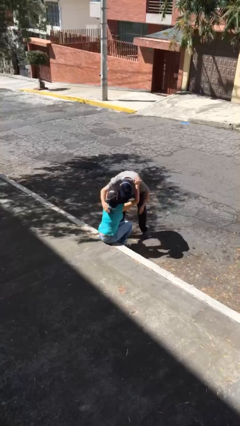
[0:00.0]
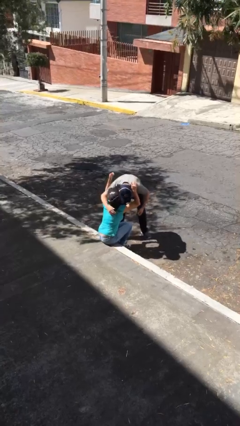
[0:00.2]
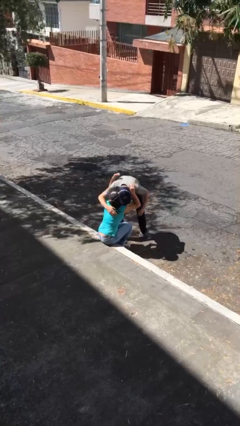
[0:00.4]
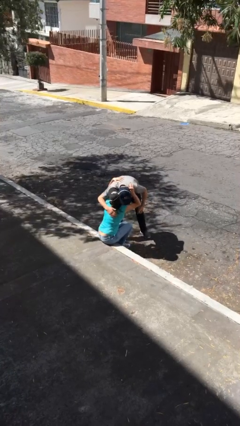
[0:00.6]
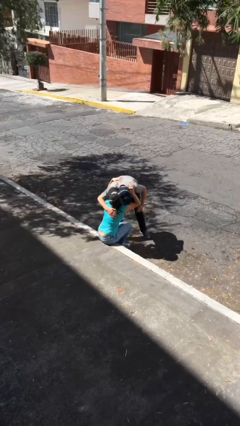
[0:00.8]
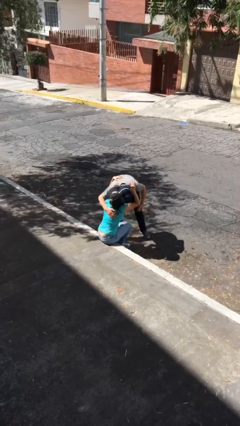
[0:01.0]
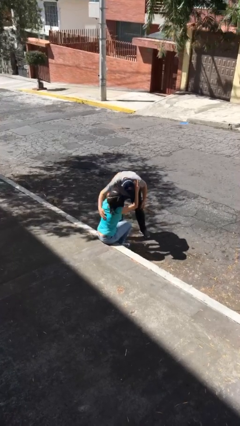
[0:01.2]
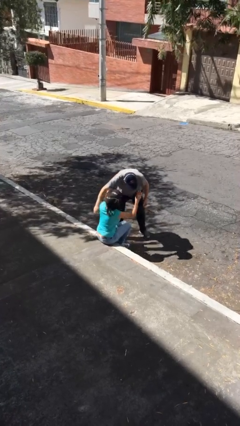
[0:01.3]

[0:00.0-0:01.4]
person embraces person

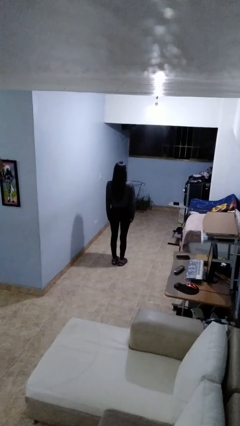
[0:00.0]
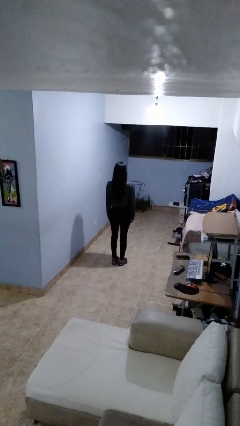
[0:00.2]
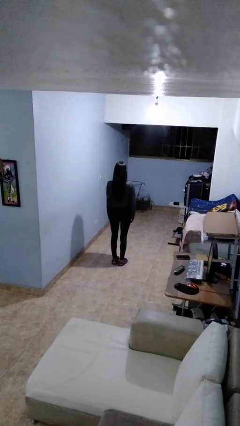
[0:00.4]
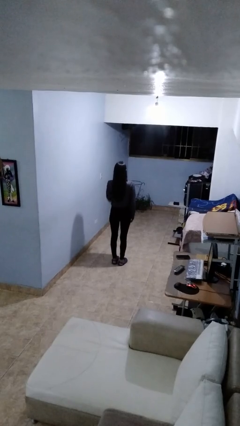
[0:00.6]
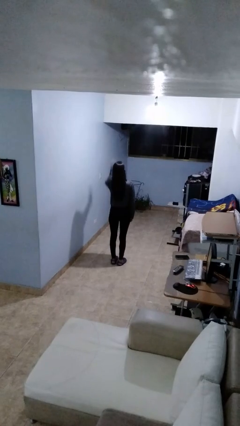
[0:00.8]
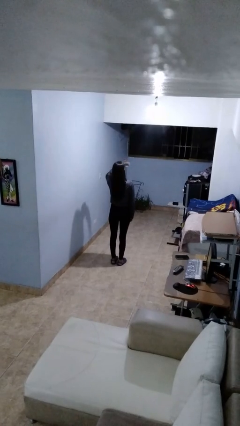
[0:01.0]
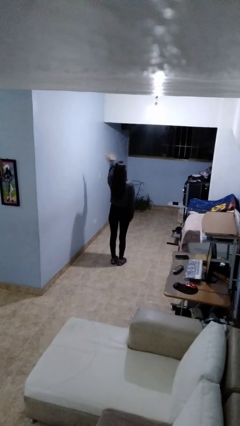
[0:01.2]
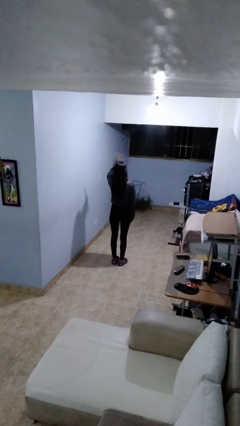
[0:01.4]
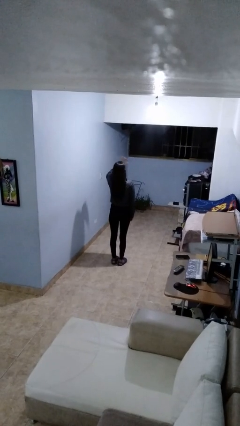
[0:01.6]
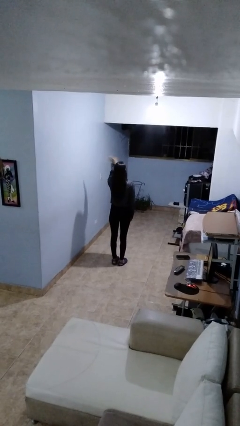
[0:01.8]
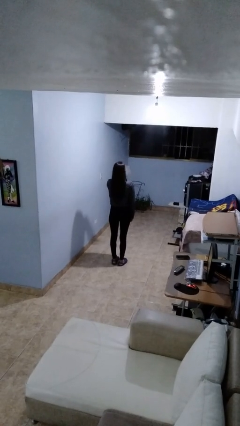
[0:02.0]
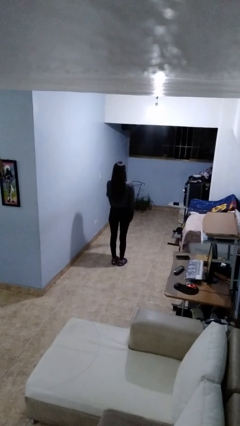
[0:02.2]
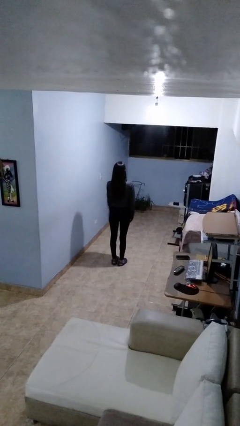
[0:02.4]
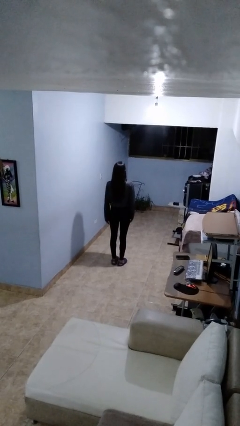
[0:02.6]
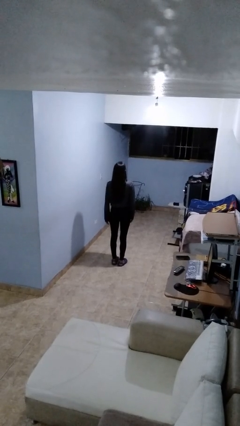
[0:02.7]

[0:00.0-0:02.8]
person salutes

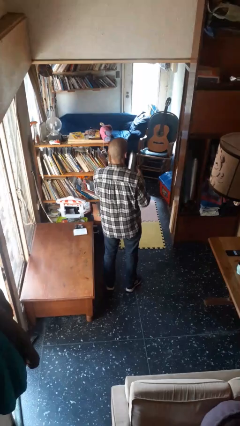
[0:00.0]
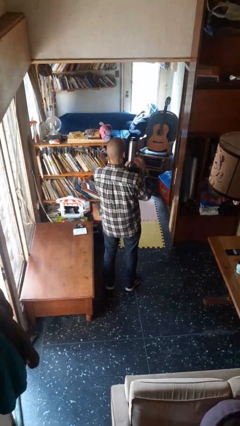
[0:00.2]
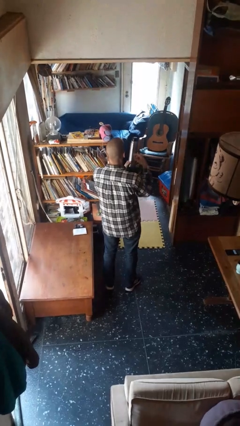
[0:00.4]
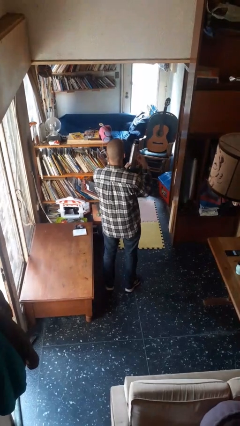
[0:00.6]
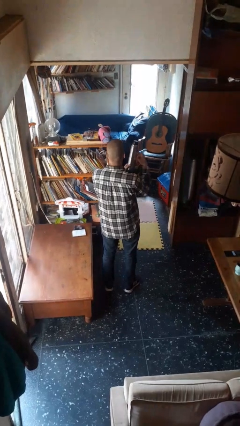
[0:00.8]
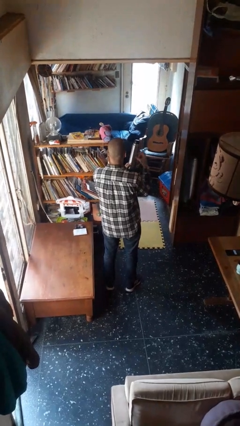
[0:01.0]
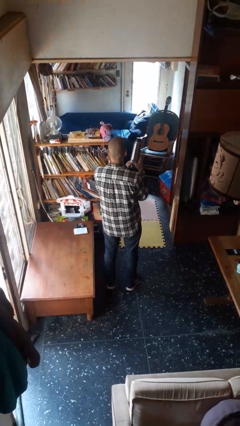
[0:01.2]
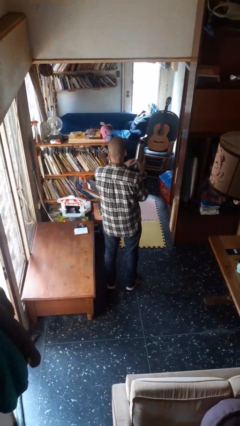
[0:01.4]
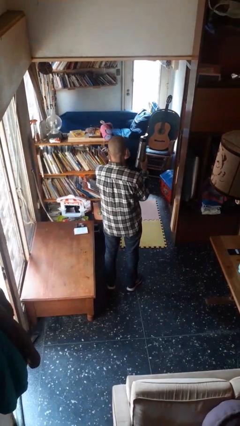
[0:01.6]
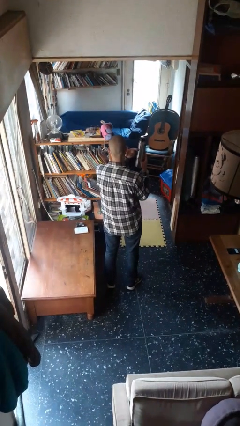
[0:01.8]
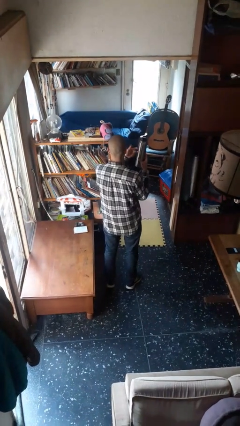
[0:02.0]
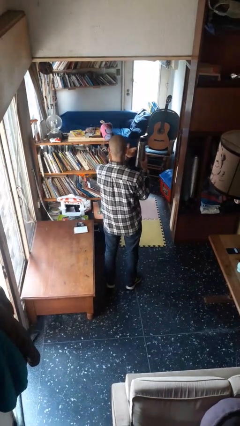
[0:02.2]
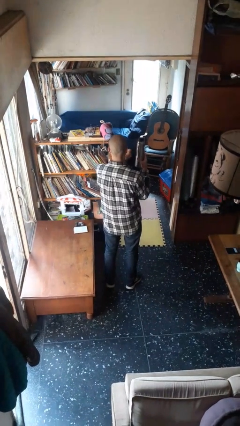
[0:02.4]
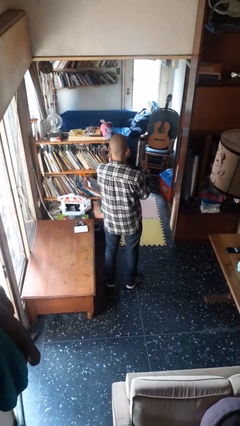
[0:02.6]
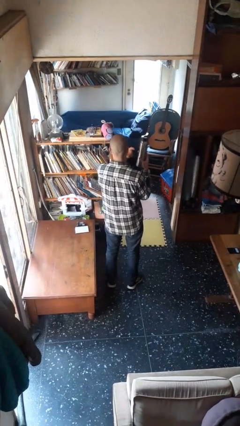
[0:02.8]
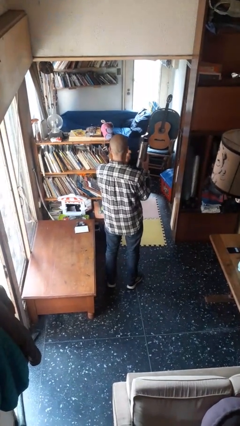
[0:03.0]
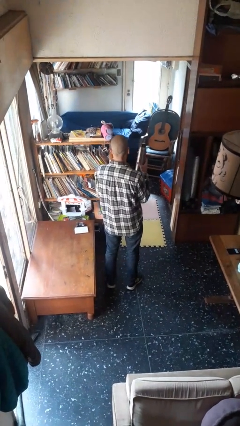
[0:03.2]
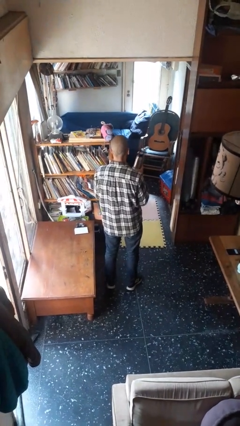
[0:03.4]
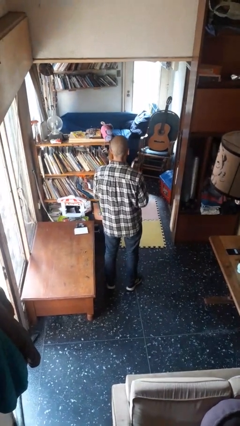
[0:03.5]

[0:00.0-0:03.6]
person taps object with finger

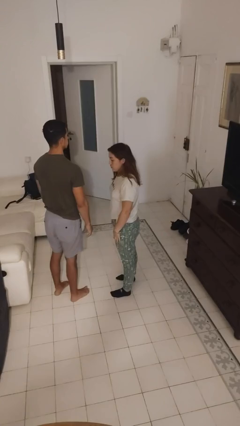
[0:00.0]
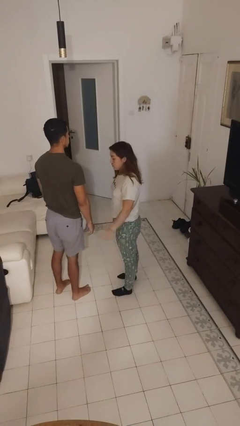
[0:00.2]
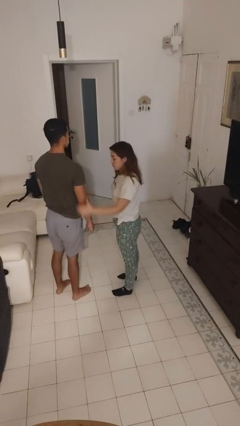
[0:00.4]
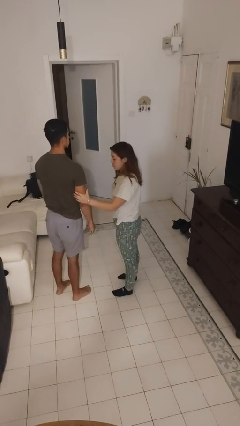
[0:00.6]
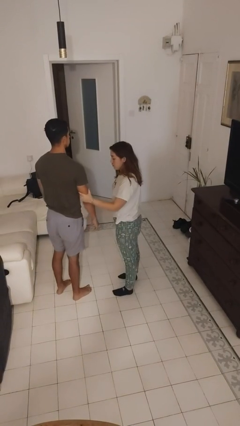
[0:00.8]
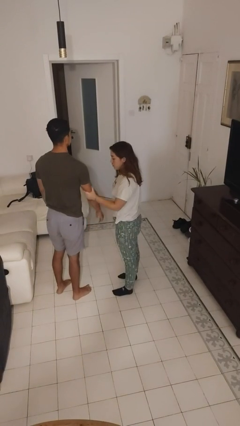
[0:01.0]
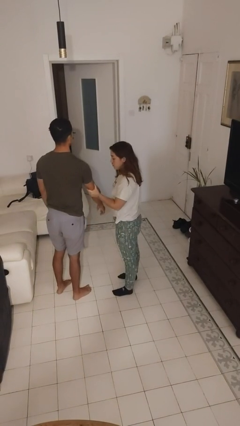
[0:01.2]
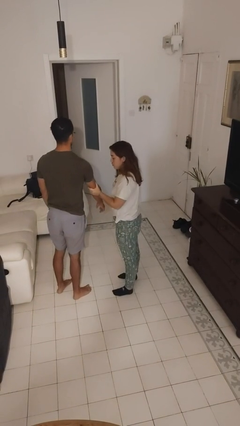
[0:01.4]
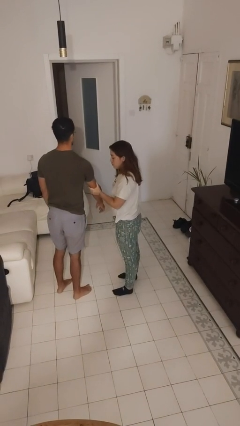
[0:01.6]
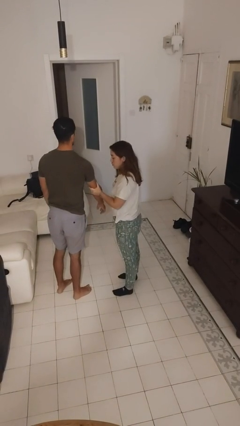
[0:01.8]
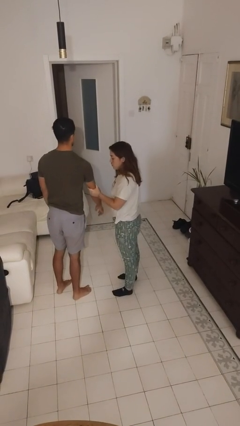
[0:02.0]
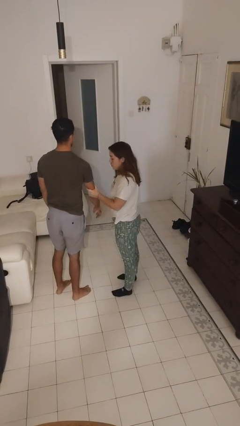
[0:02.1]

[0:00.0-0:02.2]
person grabs person by bicep

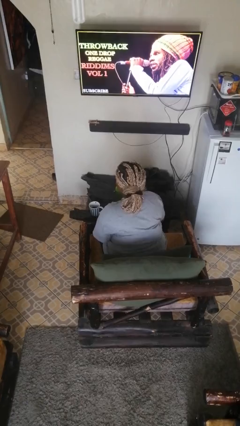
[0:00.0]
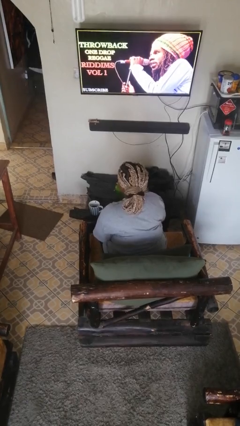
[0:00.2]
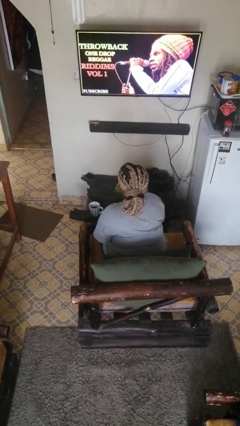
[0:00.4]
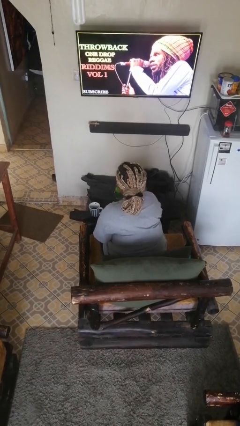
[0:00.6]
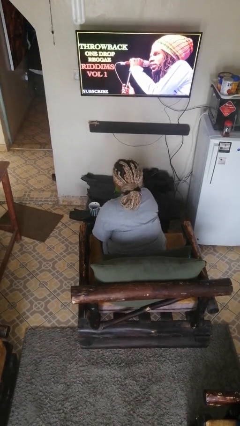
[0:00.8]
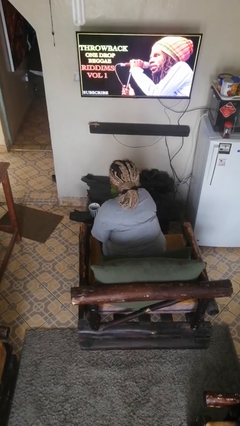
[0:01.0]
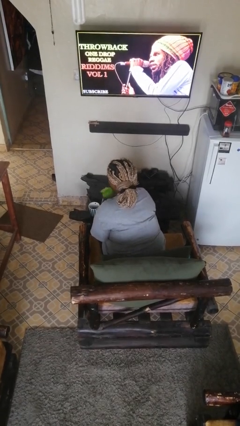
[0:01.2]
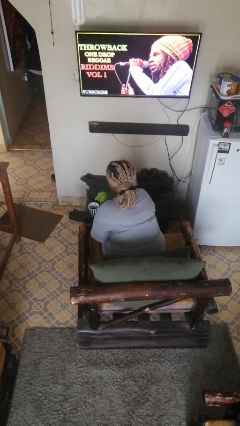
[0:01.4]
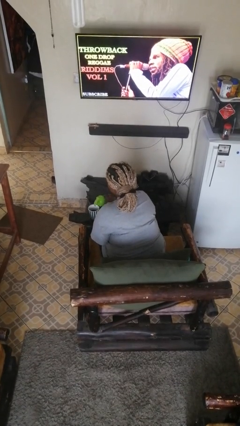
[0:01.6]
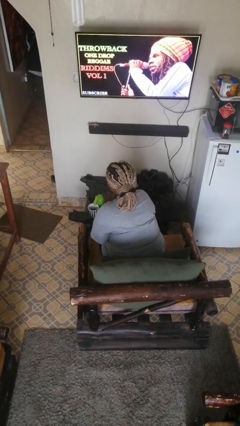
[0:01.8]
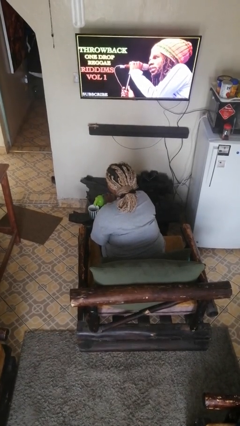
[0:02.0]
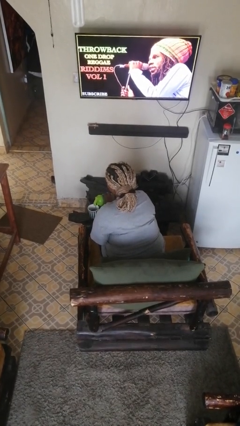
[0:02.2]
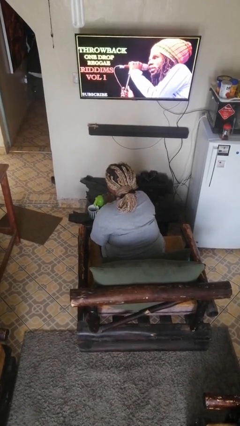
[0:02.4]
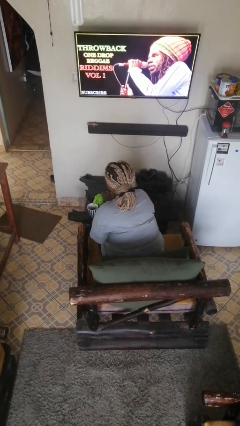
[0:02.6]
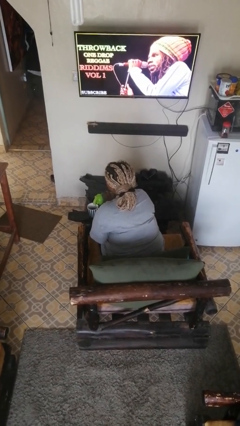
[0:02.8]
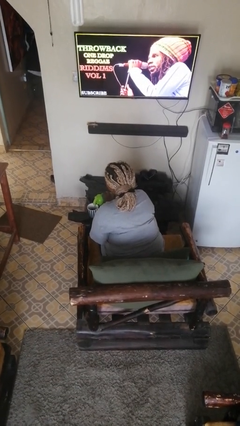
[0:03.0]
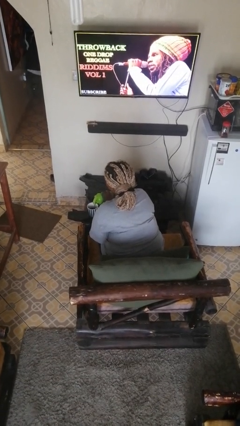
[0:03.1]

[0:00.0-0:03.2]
person pours coffee into mug

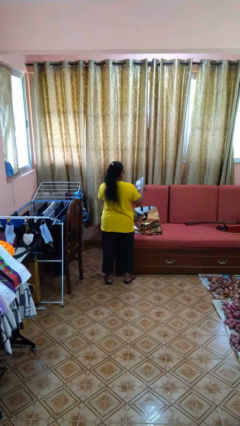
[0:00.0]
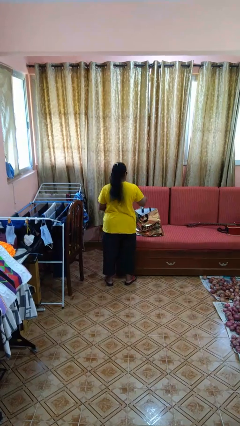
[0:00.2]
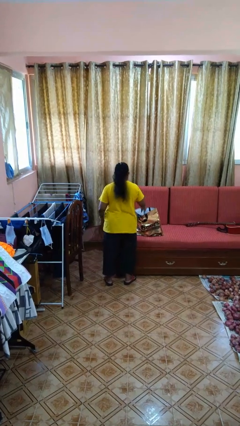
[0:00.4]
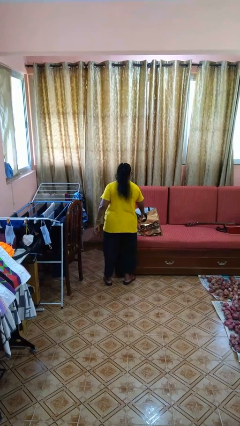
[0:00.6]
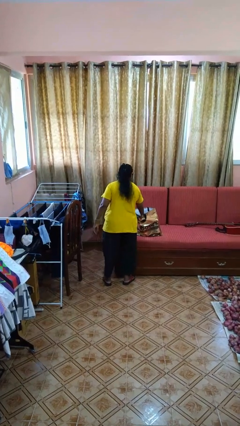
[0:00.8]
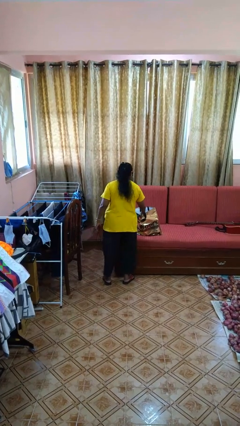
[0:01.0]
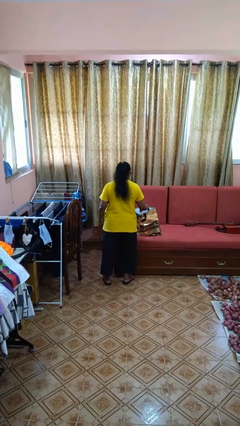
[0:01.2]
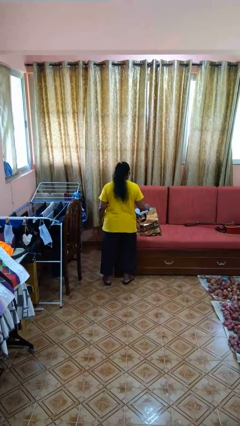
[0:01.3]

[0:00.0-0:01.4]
person puts object into bag

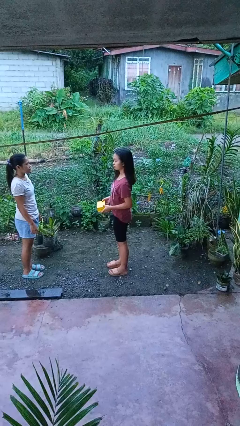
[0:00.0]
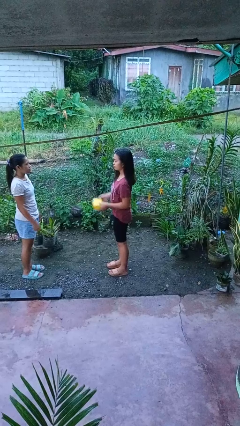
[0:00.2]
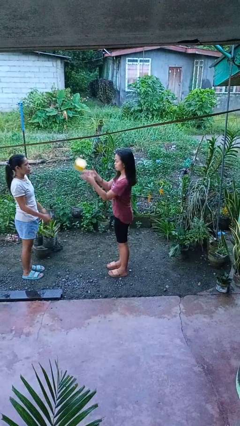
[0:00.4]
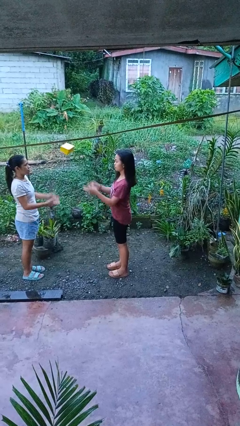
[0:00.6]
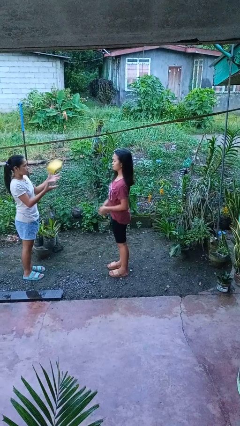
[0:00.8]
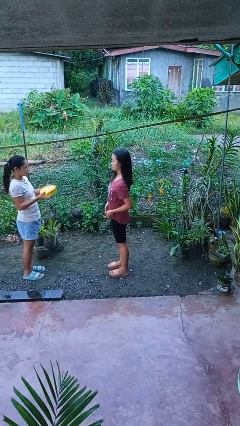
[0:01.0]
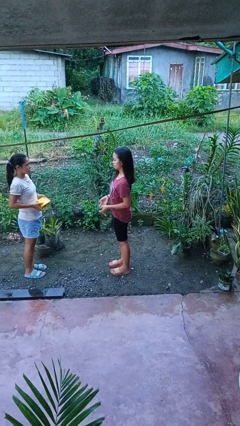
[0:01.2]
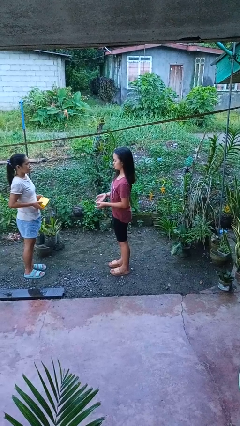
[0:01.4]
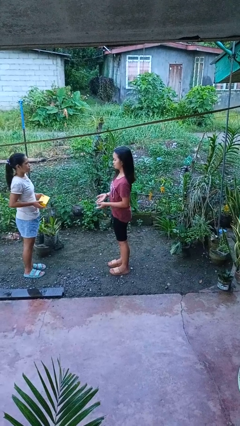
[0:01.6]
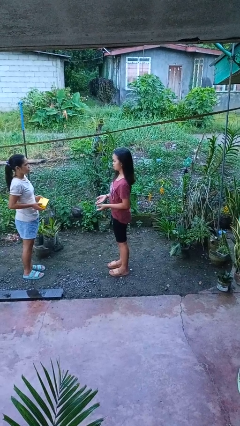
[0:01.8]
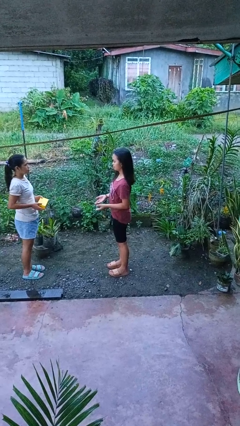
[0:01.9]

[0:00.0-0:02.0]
person throws object to person

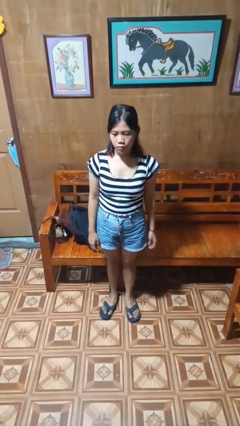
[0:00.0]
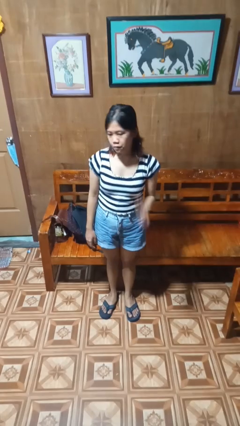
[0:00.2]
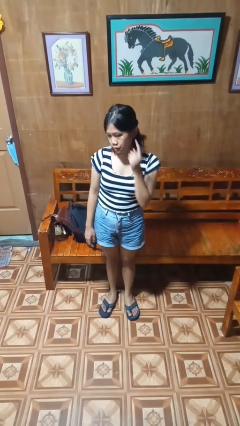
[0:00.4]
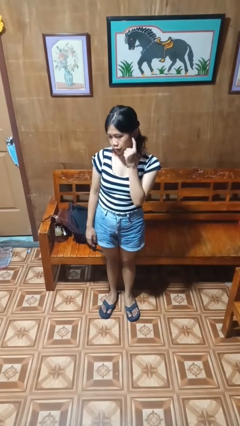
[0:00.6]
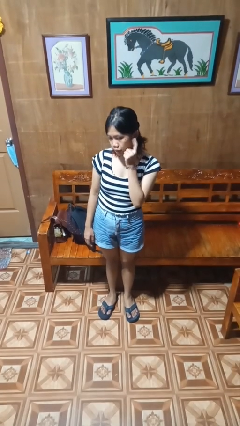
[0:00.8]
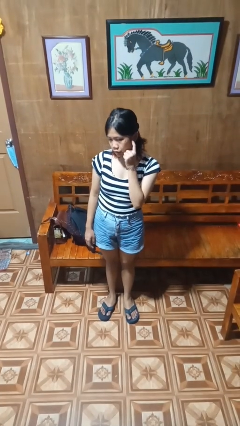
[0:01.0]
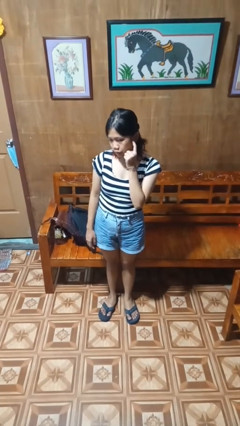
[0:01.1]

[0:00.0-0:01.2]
person gestures listen closely
